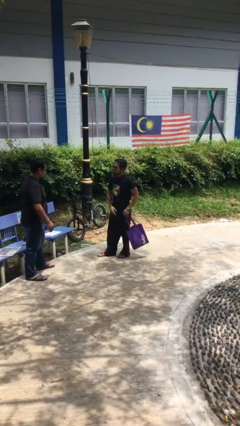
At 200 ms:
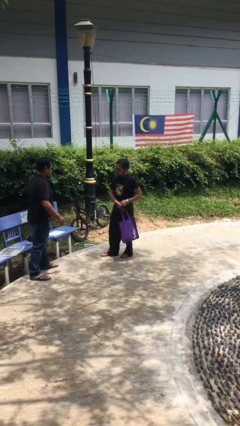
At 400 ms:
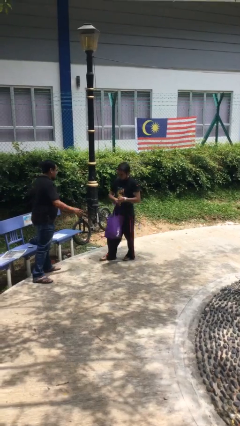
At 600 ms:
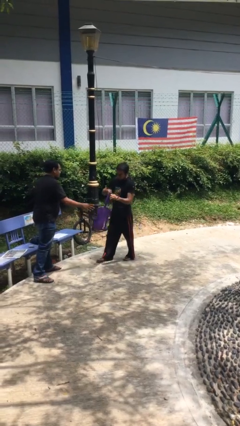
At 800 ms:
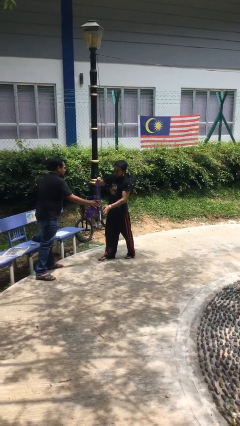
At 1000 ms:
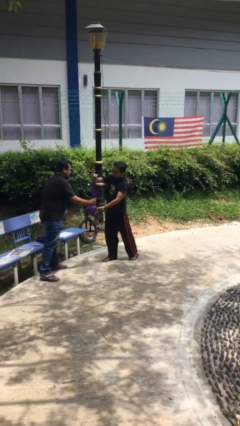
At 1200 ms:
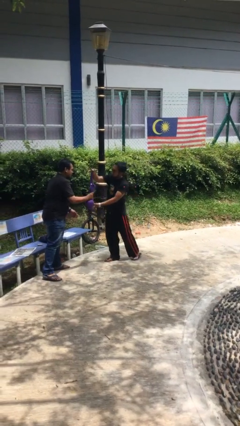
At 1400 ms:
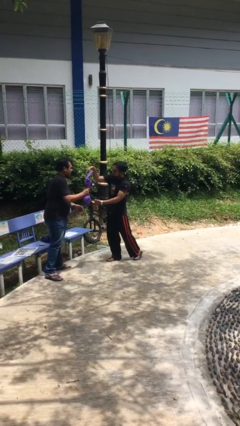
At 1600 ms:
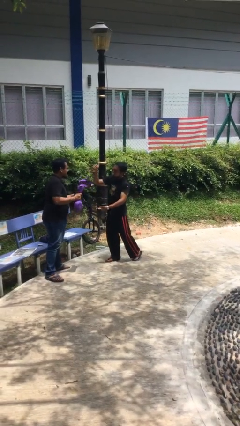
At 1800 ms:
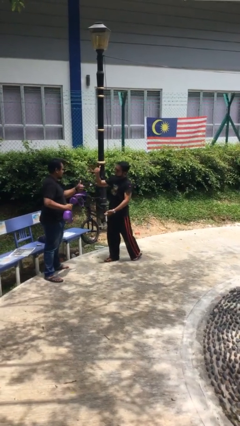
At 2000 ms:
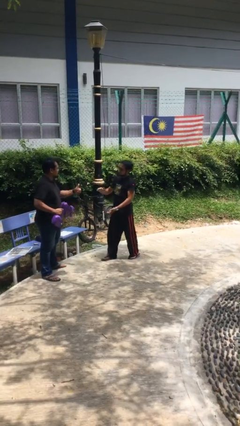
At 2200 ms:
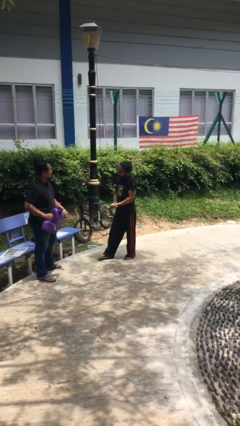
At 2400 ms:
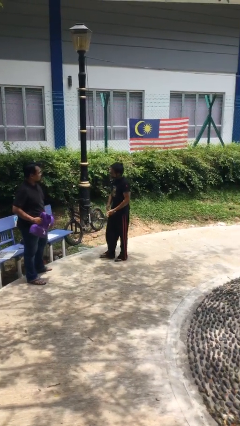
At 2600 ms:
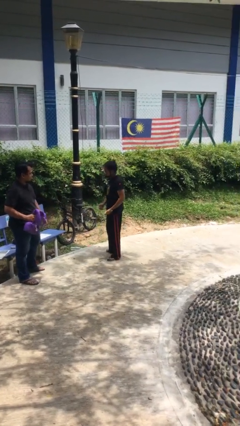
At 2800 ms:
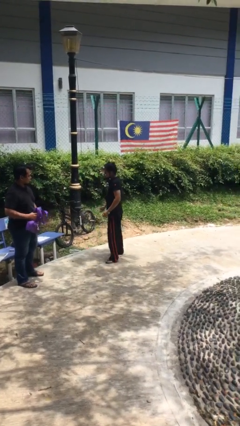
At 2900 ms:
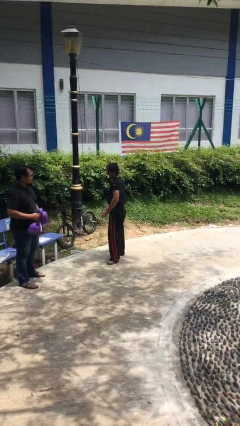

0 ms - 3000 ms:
person transfers object to person

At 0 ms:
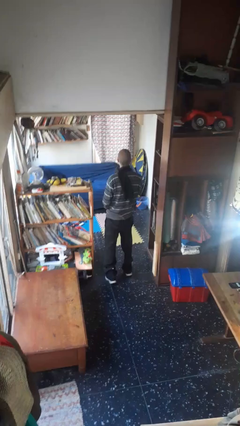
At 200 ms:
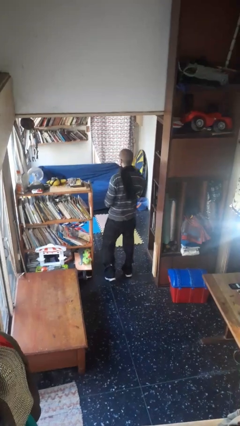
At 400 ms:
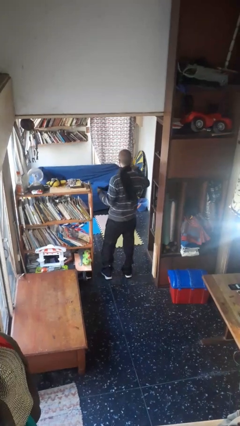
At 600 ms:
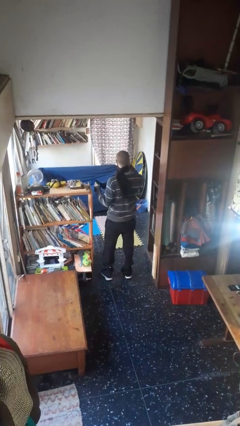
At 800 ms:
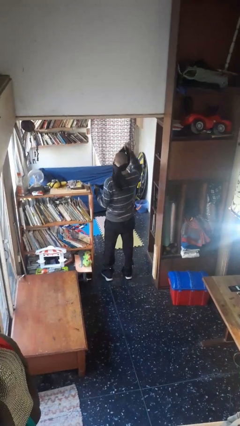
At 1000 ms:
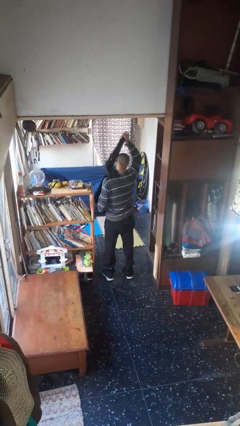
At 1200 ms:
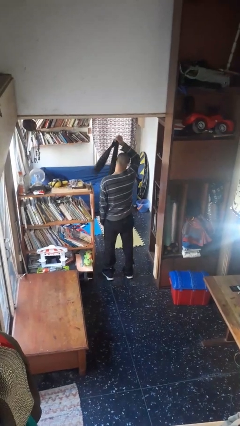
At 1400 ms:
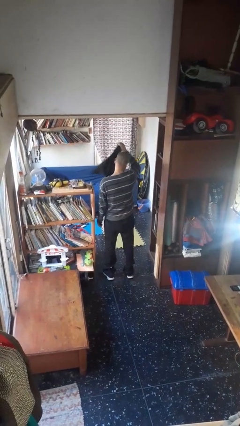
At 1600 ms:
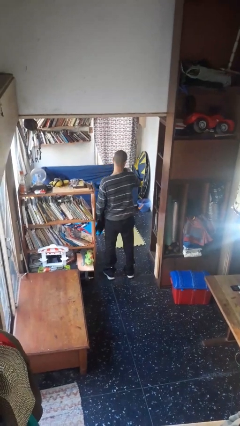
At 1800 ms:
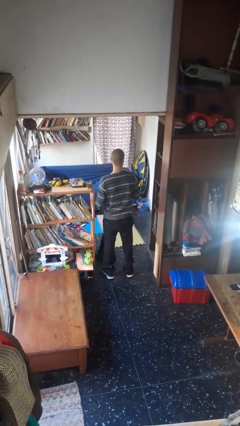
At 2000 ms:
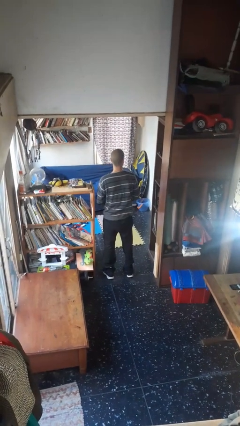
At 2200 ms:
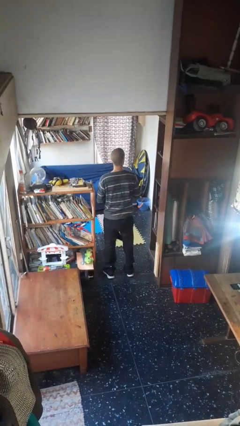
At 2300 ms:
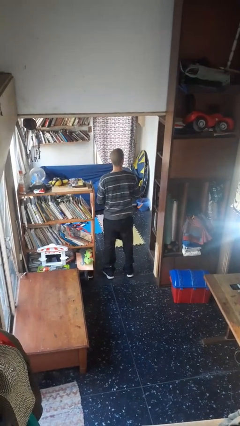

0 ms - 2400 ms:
person takes off scarf

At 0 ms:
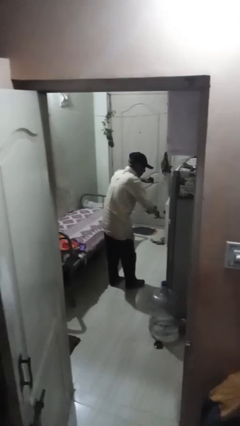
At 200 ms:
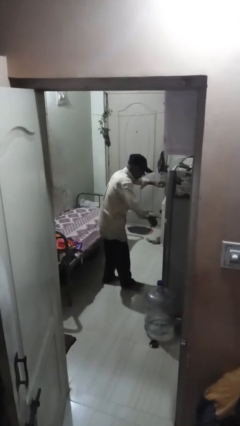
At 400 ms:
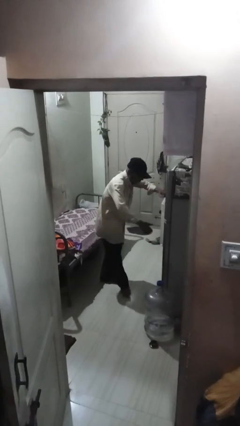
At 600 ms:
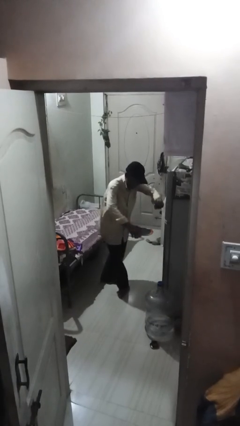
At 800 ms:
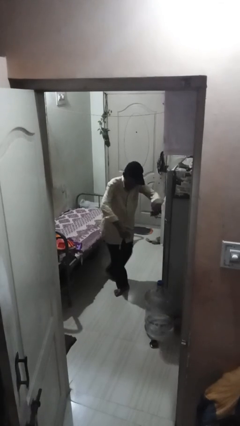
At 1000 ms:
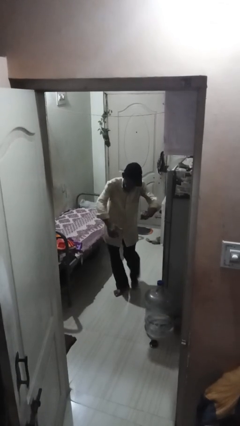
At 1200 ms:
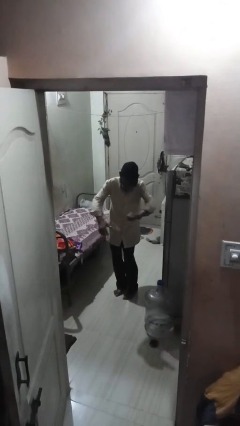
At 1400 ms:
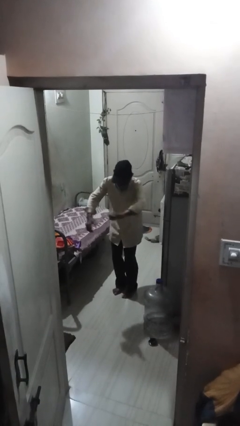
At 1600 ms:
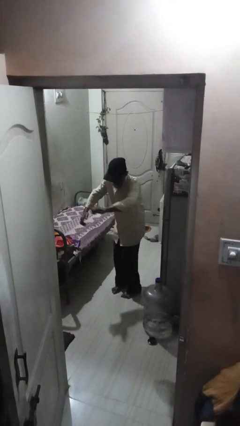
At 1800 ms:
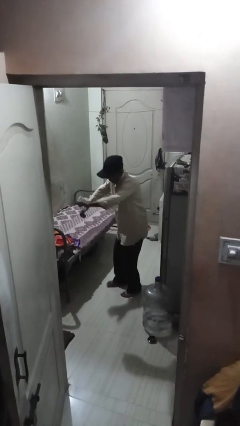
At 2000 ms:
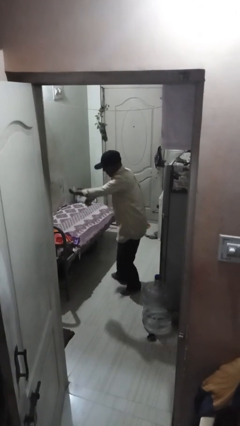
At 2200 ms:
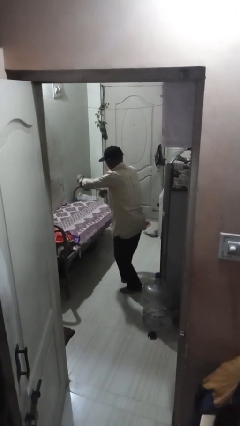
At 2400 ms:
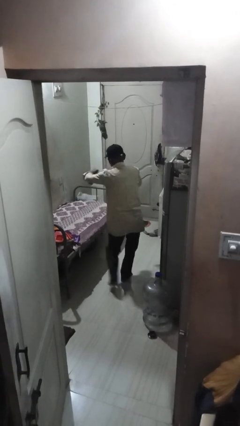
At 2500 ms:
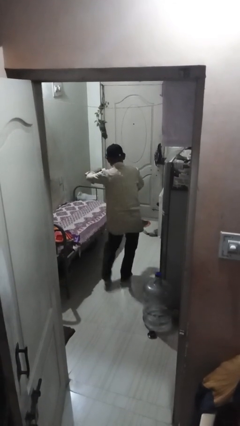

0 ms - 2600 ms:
person twirls

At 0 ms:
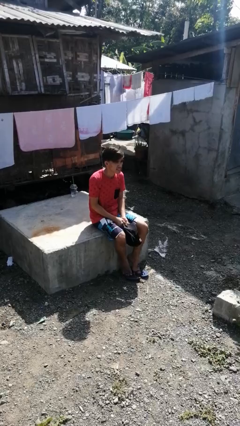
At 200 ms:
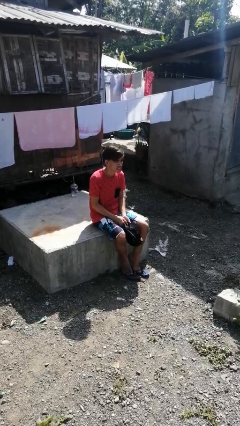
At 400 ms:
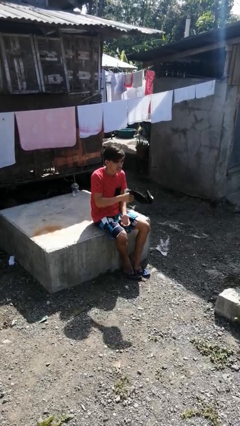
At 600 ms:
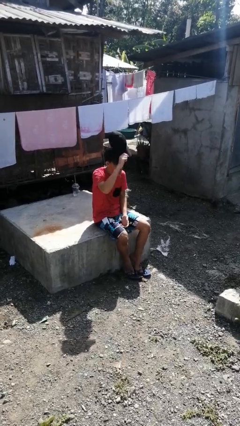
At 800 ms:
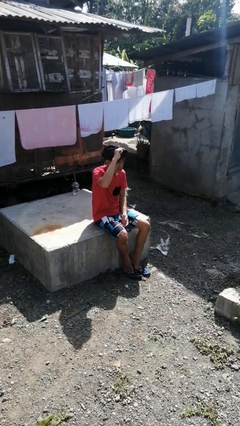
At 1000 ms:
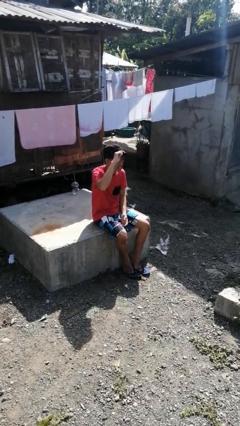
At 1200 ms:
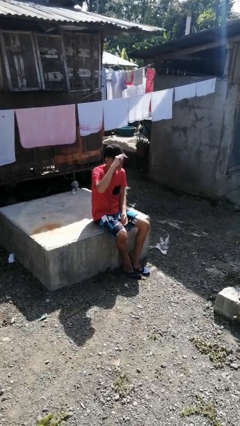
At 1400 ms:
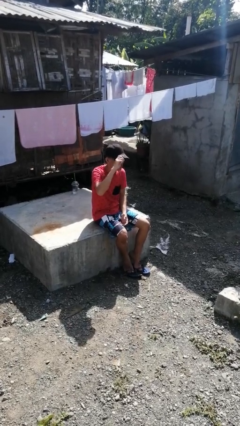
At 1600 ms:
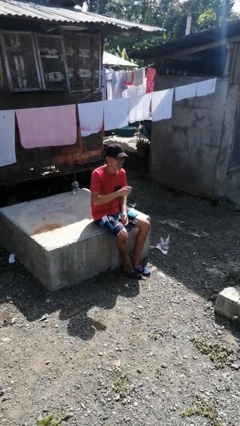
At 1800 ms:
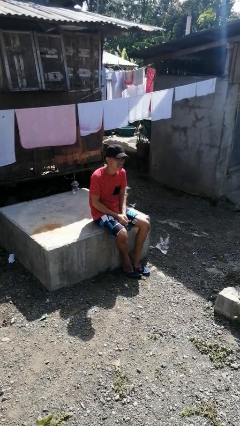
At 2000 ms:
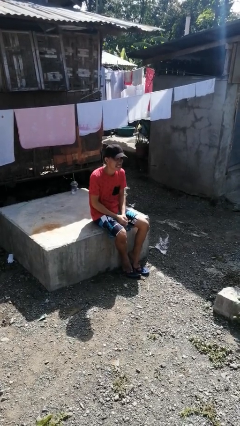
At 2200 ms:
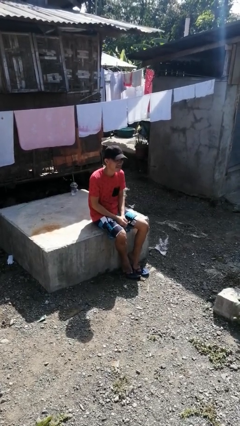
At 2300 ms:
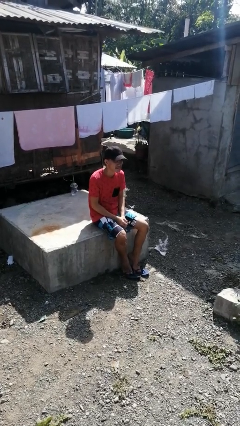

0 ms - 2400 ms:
person puts on hat

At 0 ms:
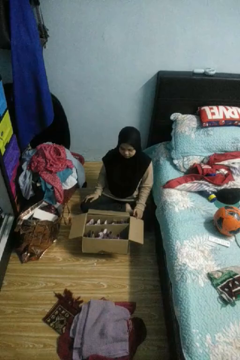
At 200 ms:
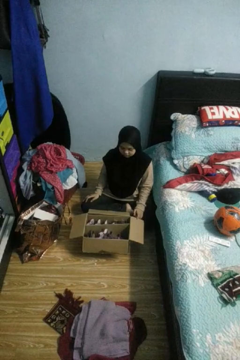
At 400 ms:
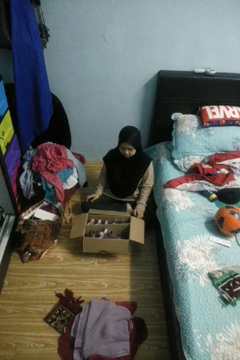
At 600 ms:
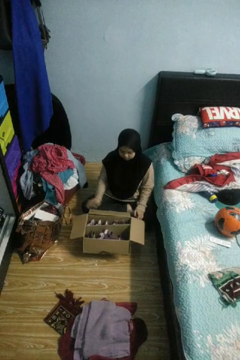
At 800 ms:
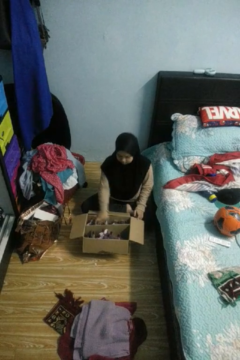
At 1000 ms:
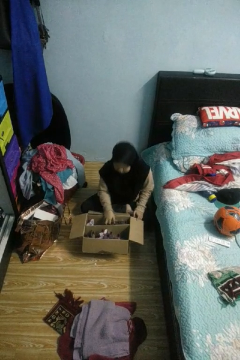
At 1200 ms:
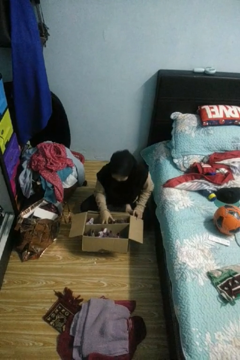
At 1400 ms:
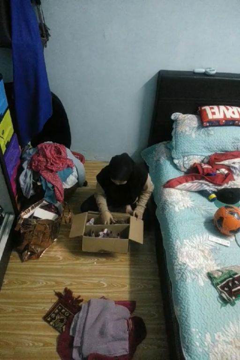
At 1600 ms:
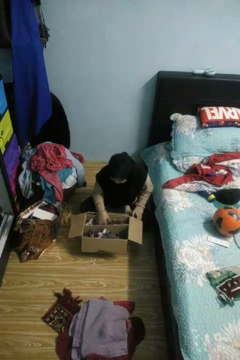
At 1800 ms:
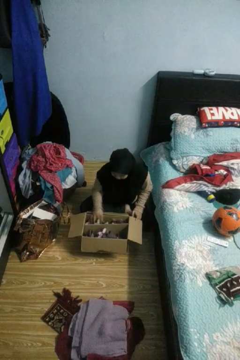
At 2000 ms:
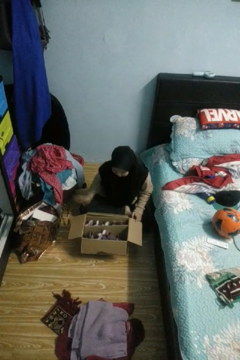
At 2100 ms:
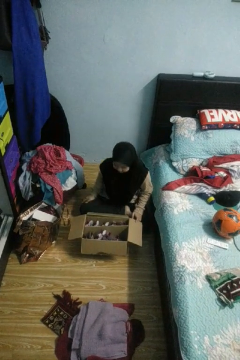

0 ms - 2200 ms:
person searches in box

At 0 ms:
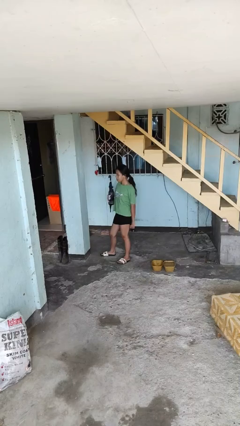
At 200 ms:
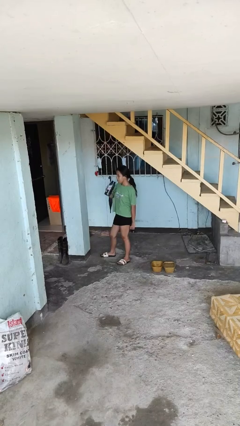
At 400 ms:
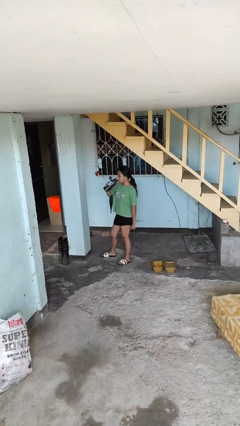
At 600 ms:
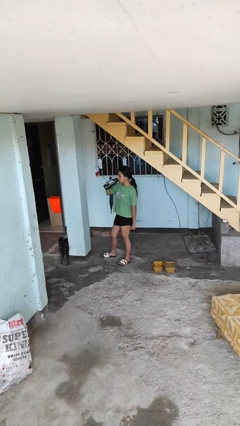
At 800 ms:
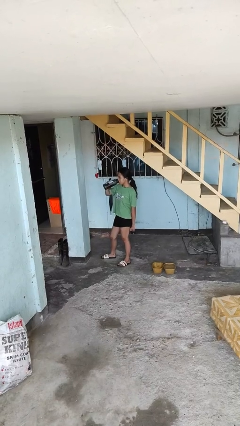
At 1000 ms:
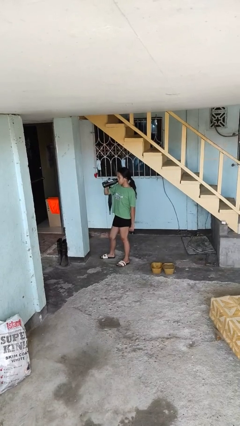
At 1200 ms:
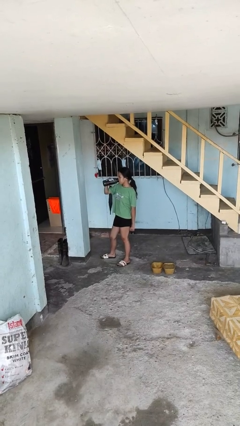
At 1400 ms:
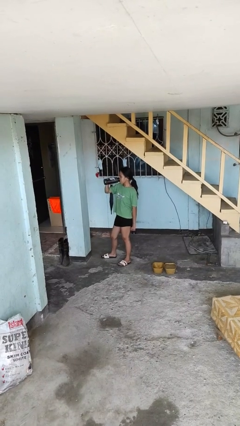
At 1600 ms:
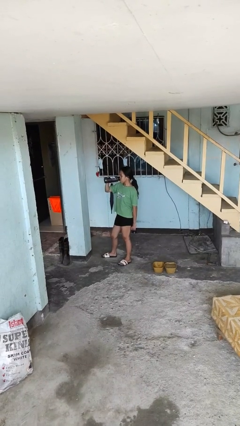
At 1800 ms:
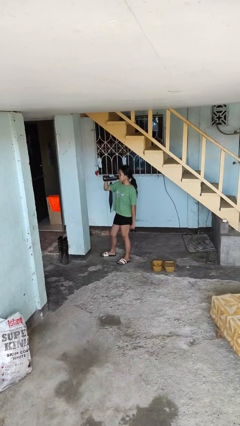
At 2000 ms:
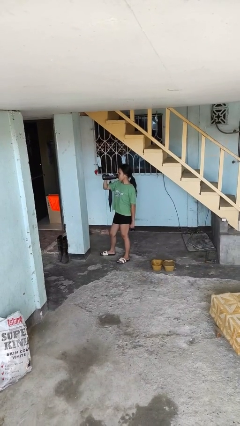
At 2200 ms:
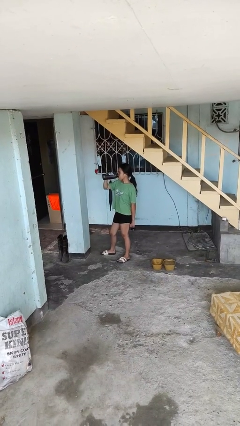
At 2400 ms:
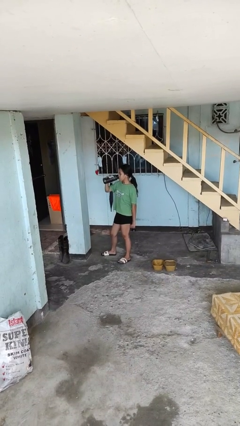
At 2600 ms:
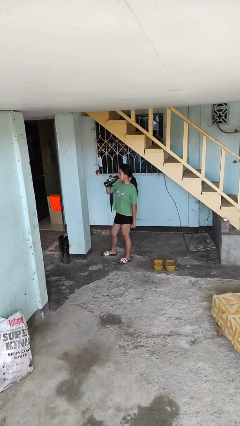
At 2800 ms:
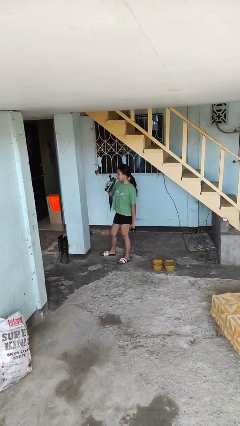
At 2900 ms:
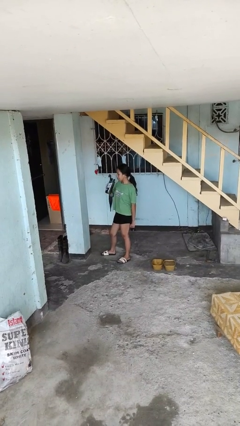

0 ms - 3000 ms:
person drinks from bottle

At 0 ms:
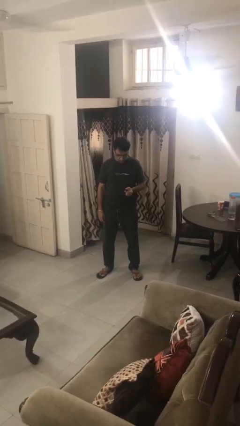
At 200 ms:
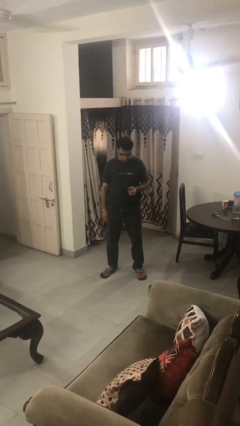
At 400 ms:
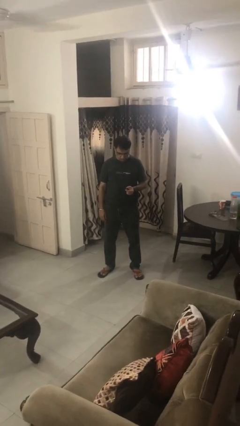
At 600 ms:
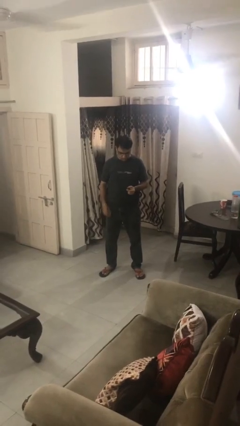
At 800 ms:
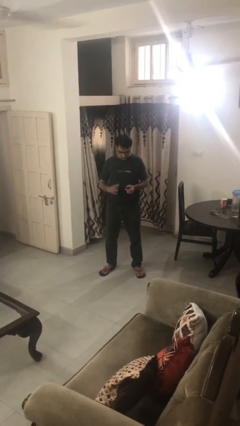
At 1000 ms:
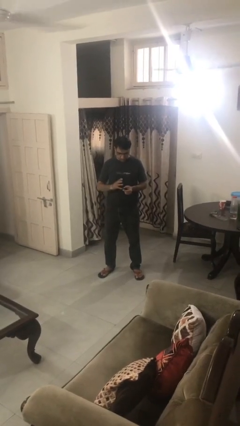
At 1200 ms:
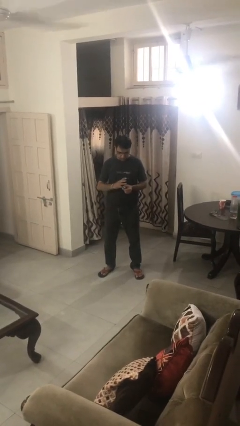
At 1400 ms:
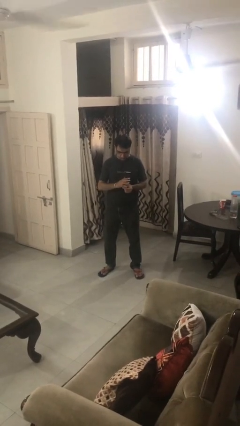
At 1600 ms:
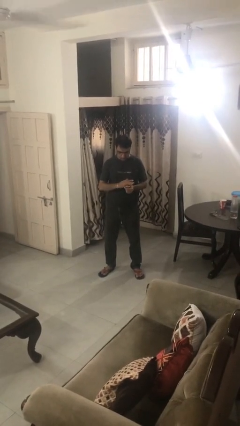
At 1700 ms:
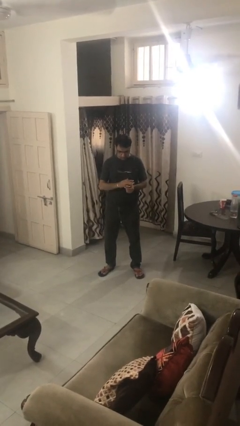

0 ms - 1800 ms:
person puts on ring

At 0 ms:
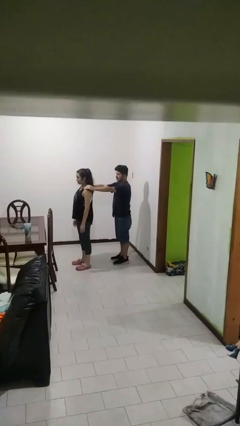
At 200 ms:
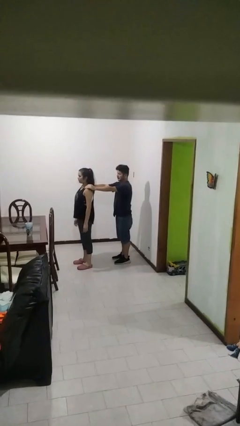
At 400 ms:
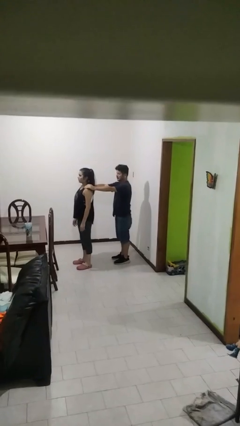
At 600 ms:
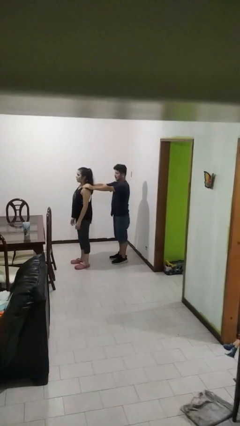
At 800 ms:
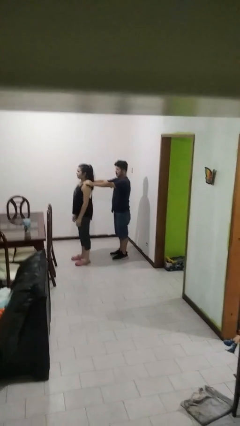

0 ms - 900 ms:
person grabs person by shoulder
